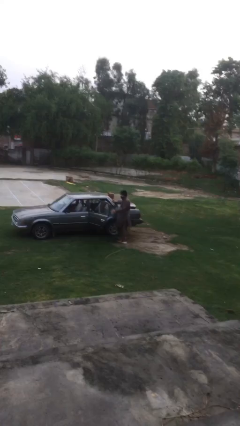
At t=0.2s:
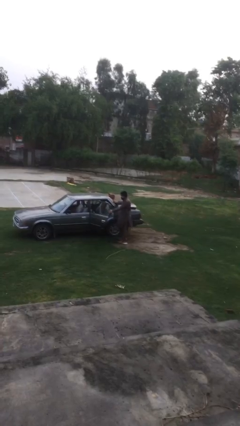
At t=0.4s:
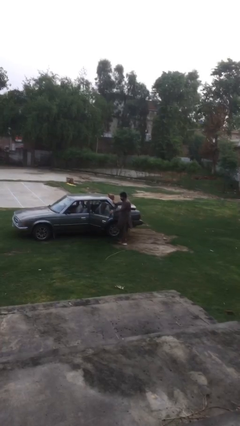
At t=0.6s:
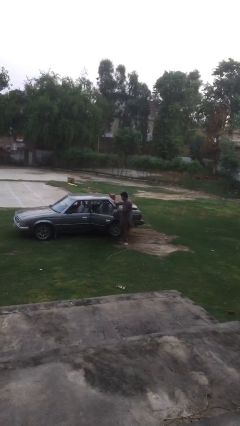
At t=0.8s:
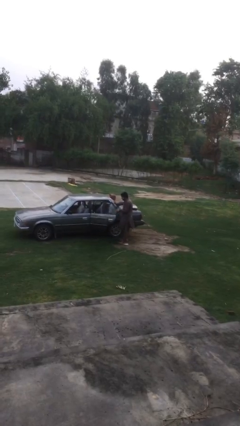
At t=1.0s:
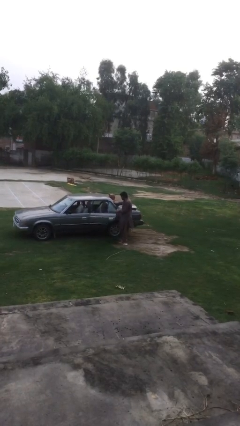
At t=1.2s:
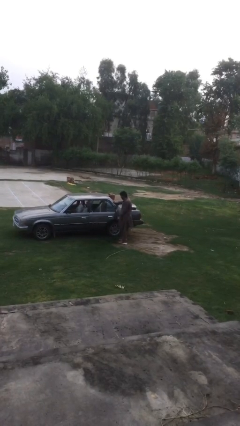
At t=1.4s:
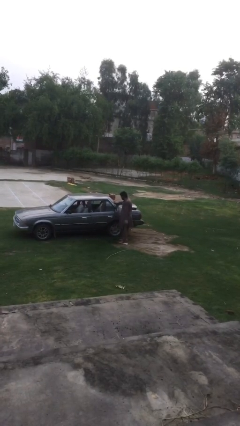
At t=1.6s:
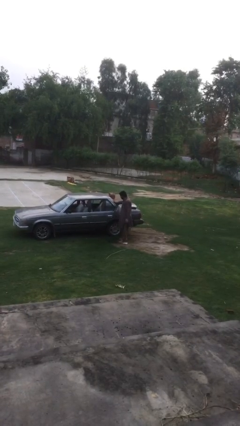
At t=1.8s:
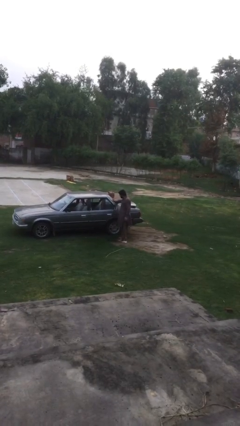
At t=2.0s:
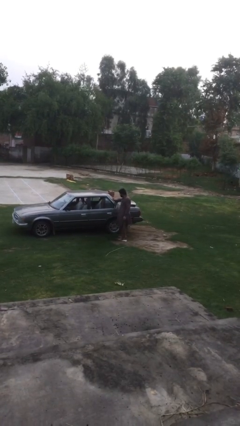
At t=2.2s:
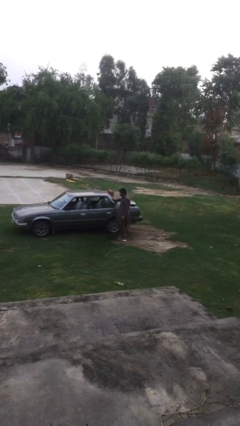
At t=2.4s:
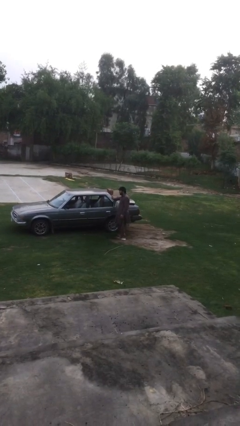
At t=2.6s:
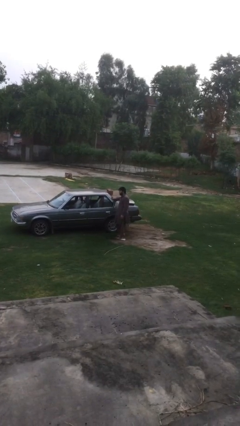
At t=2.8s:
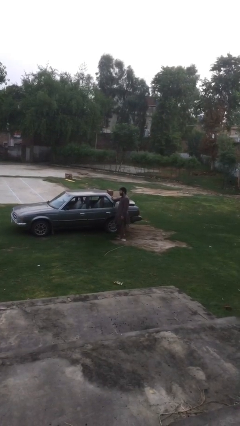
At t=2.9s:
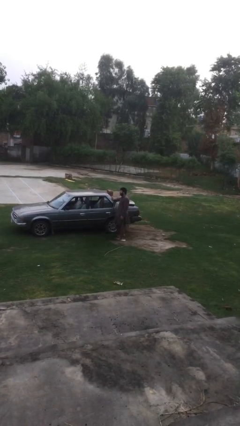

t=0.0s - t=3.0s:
person closes car door

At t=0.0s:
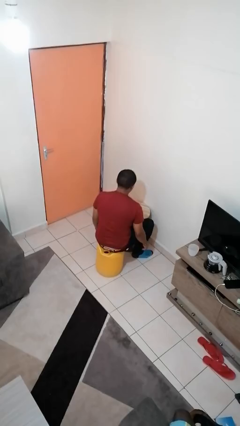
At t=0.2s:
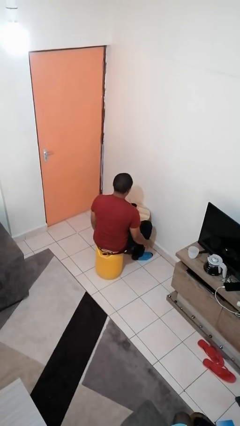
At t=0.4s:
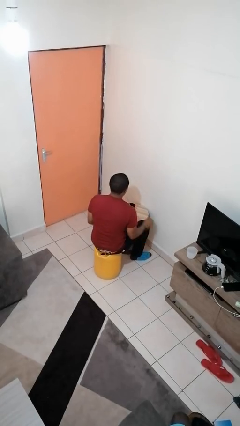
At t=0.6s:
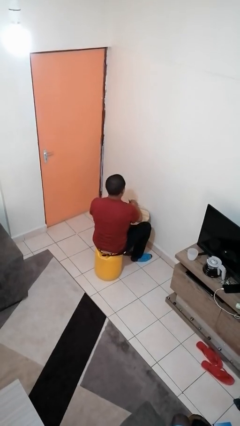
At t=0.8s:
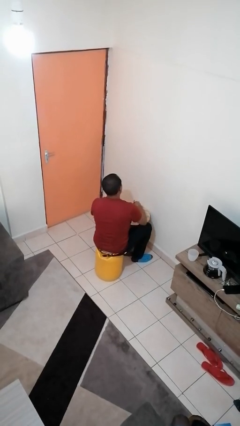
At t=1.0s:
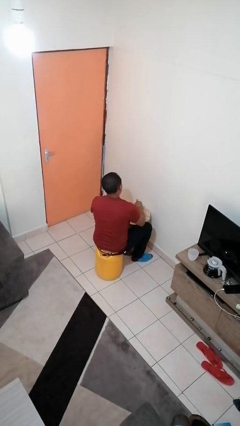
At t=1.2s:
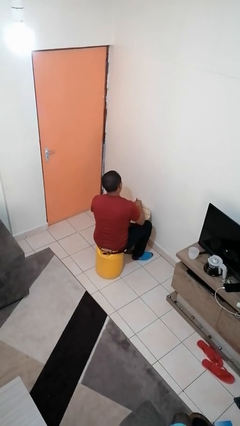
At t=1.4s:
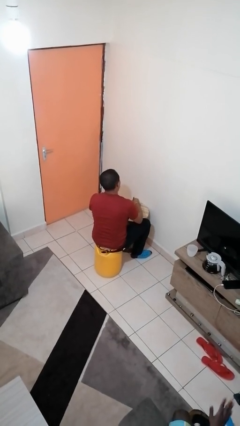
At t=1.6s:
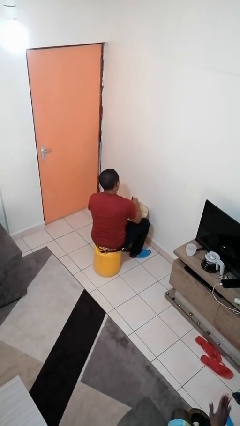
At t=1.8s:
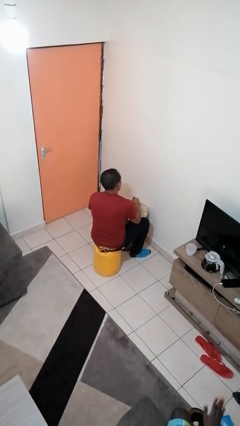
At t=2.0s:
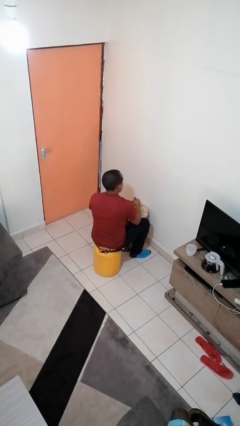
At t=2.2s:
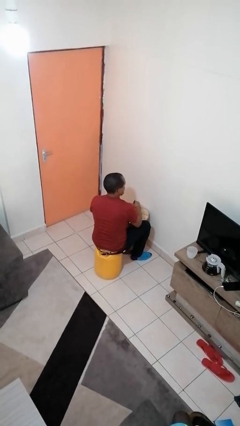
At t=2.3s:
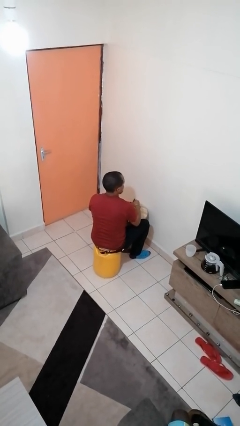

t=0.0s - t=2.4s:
person stirs mug

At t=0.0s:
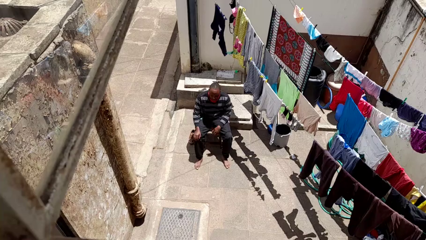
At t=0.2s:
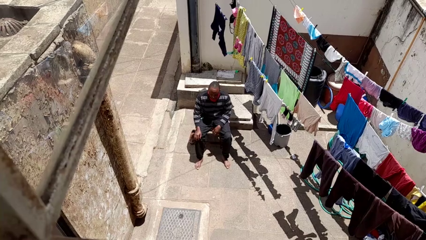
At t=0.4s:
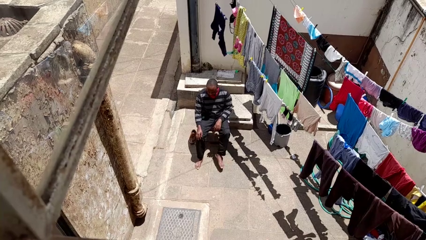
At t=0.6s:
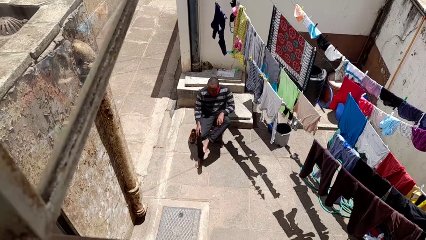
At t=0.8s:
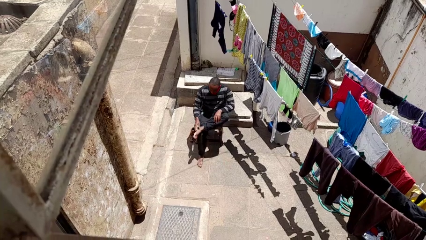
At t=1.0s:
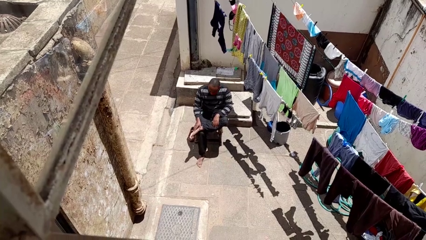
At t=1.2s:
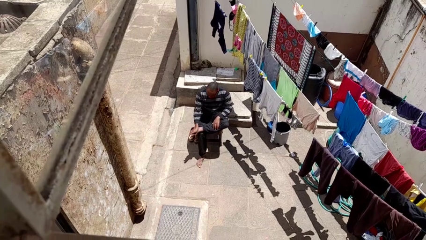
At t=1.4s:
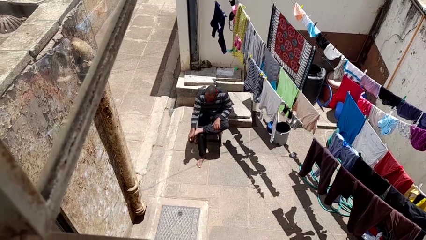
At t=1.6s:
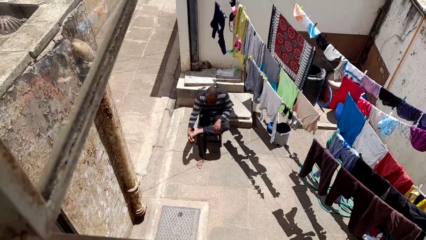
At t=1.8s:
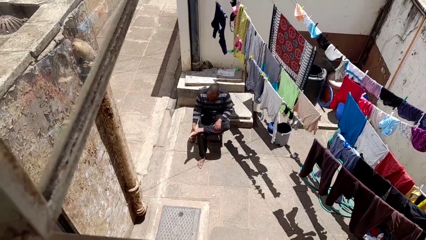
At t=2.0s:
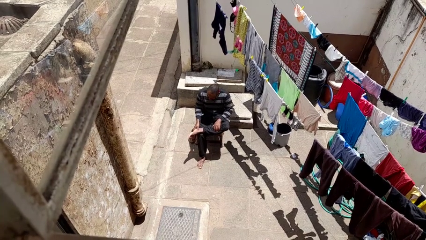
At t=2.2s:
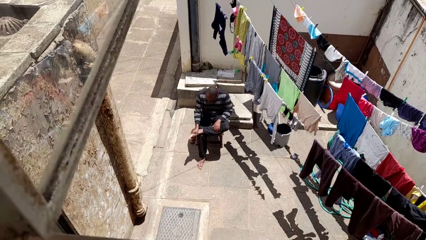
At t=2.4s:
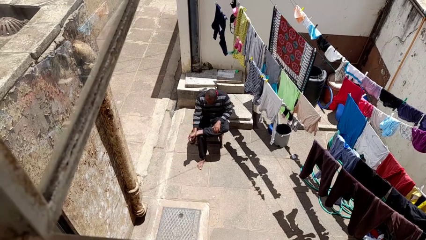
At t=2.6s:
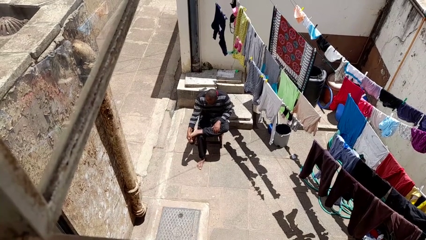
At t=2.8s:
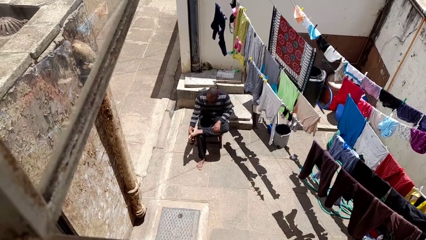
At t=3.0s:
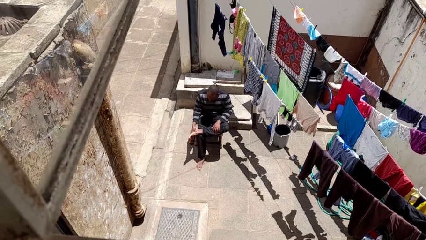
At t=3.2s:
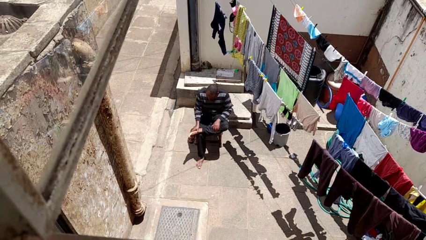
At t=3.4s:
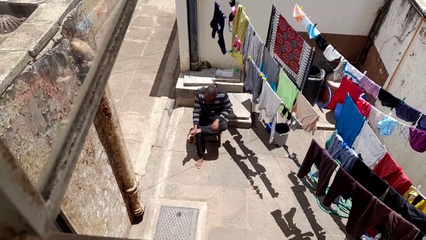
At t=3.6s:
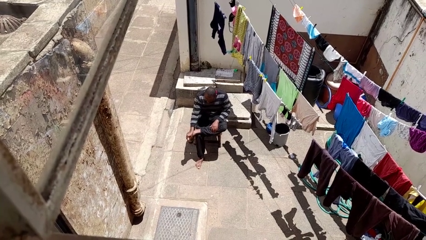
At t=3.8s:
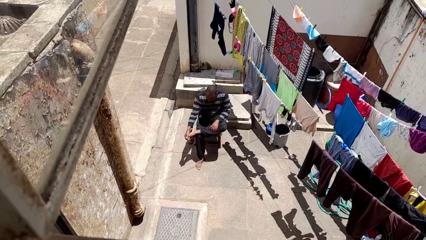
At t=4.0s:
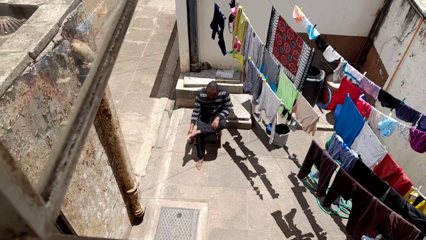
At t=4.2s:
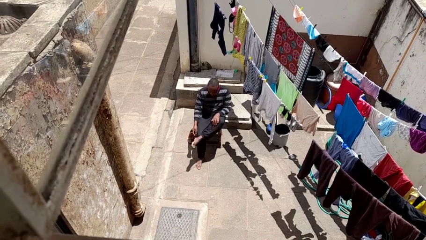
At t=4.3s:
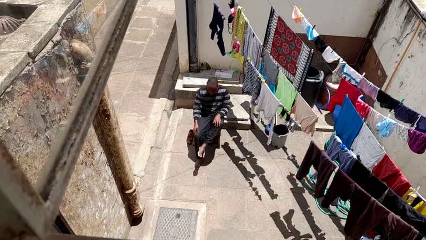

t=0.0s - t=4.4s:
person rubs foot

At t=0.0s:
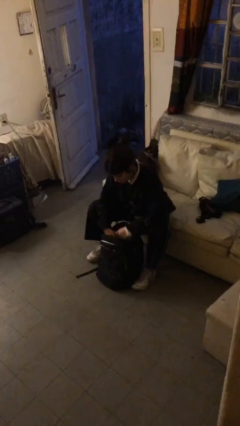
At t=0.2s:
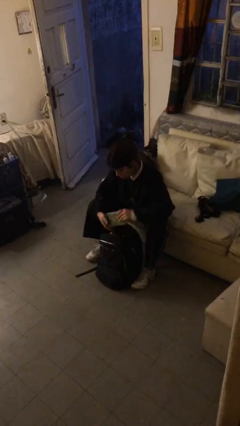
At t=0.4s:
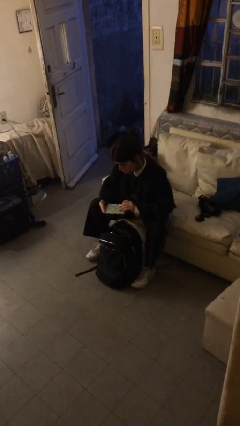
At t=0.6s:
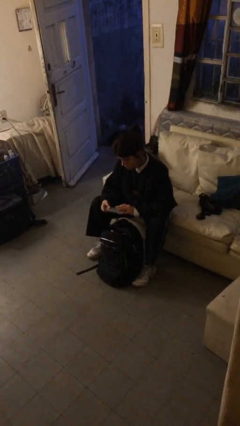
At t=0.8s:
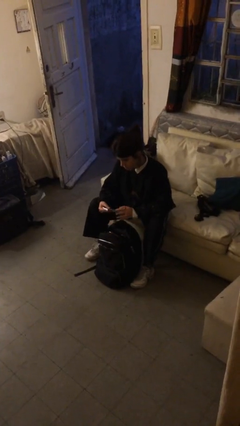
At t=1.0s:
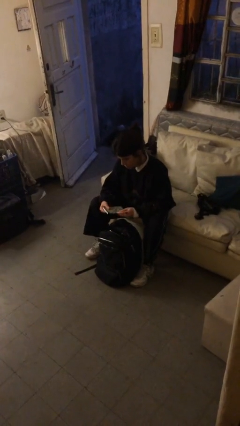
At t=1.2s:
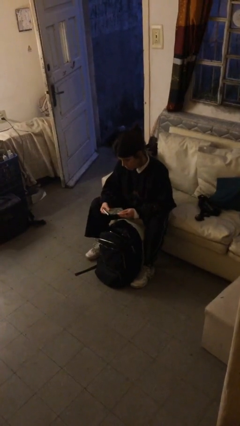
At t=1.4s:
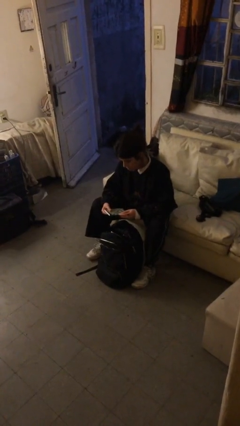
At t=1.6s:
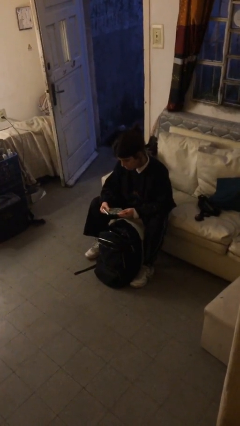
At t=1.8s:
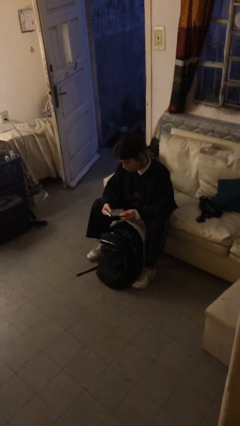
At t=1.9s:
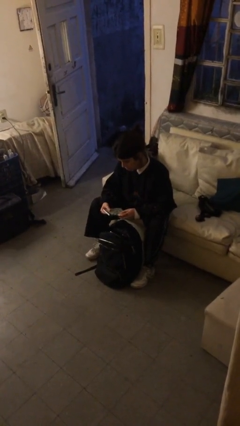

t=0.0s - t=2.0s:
person takes object from backpack

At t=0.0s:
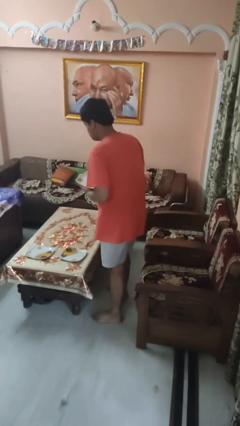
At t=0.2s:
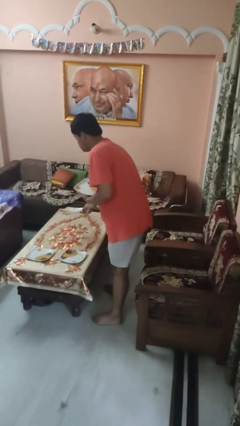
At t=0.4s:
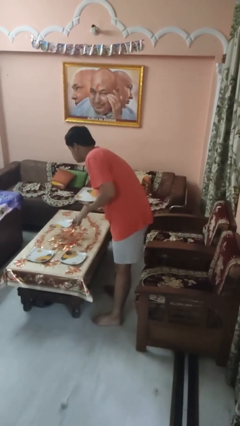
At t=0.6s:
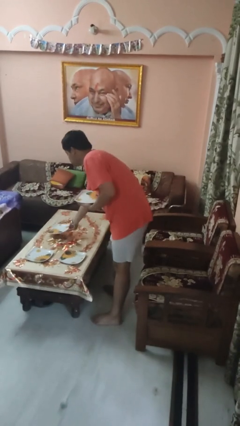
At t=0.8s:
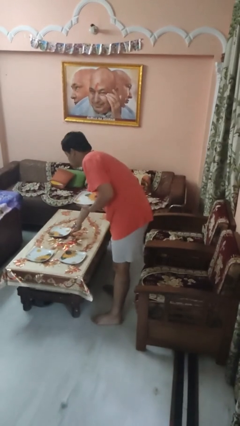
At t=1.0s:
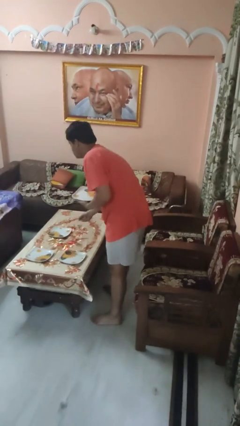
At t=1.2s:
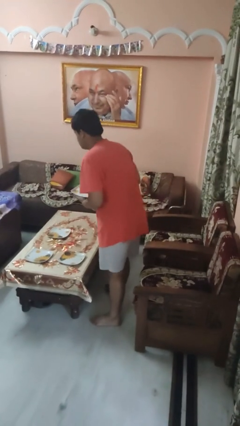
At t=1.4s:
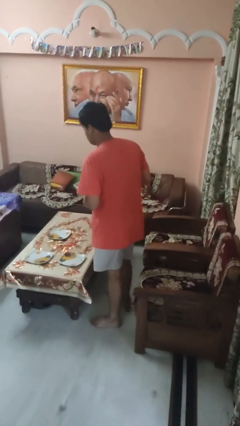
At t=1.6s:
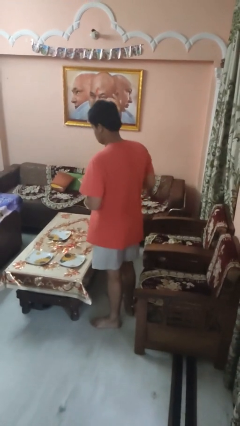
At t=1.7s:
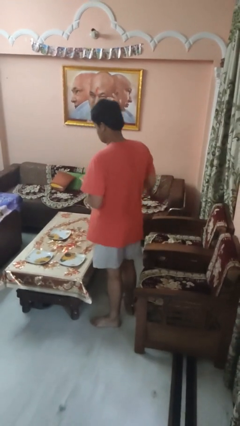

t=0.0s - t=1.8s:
person sets table

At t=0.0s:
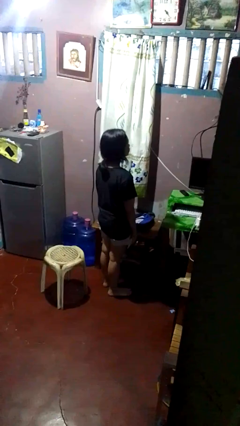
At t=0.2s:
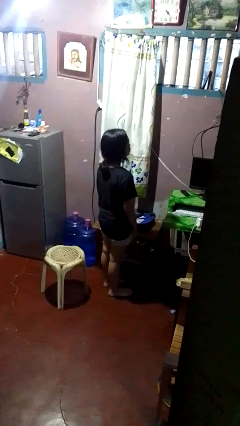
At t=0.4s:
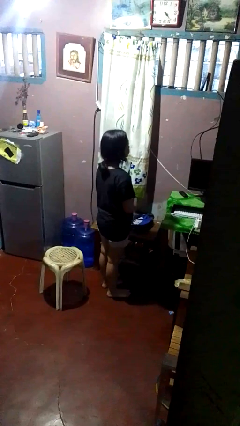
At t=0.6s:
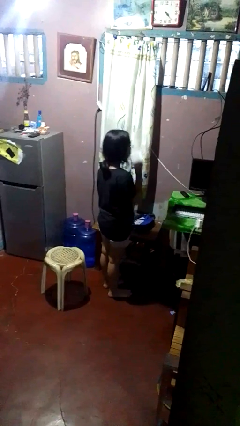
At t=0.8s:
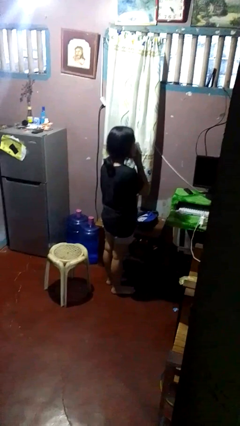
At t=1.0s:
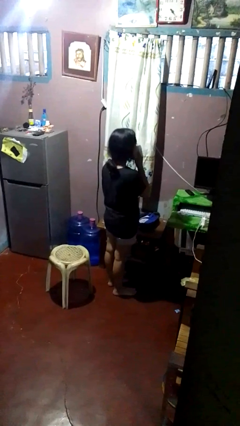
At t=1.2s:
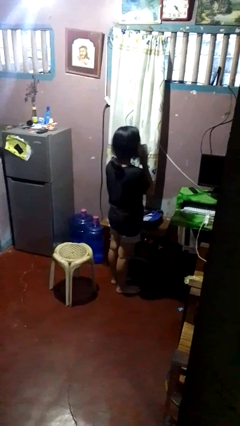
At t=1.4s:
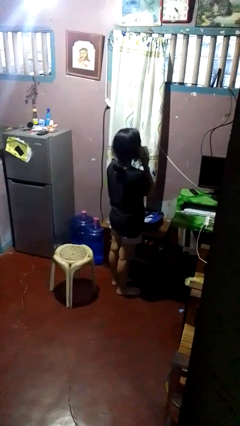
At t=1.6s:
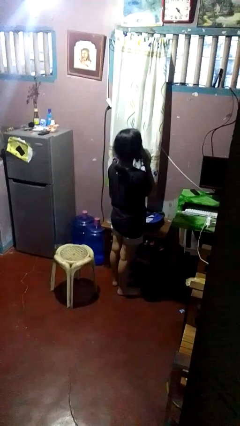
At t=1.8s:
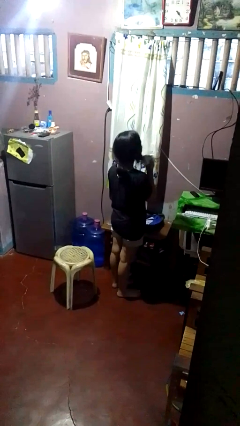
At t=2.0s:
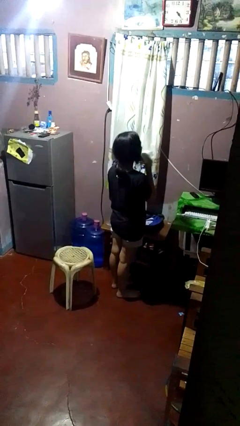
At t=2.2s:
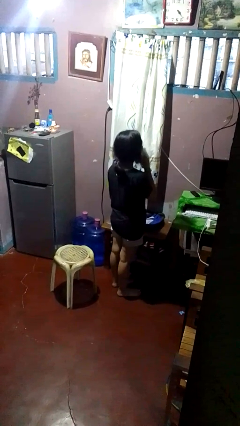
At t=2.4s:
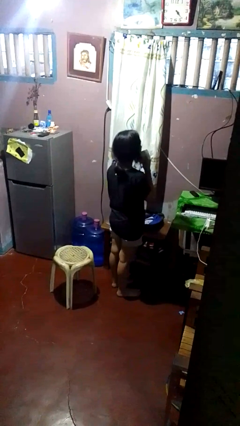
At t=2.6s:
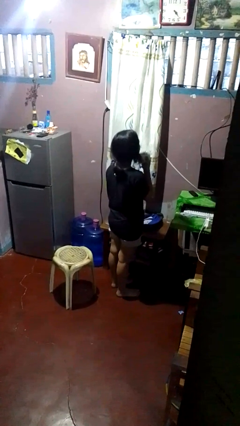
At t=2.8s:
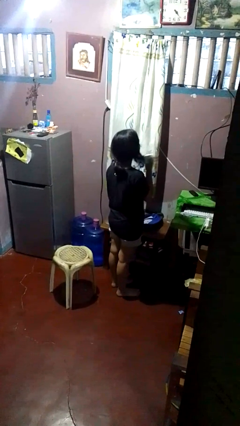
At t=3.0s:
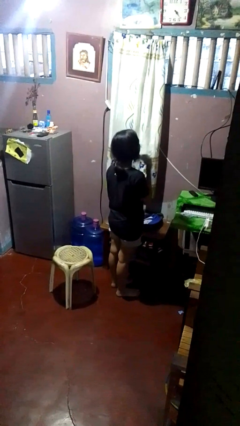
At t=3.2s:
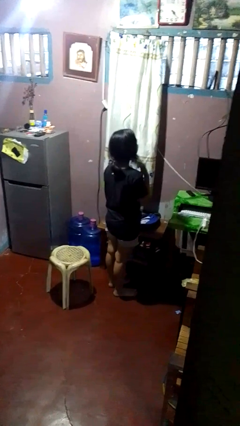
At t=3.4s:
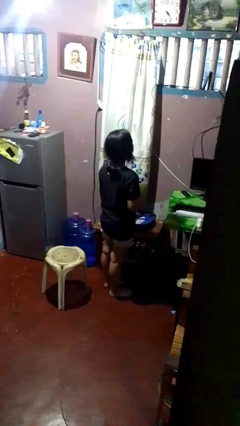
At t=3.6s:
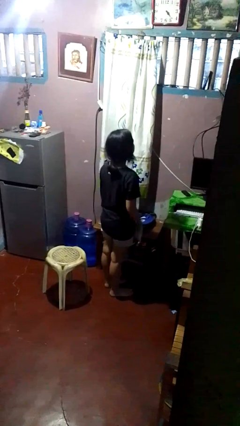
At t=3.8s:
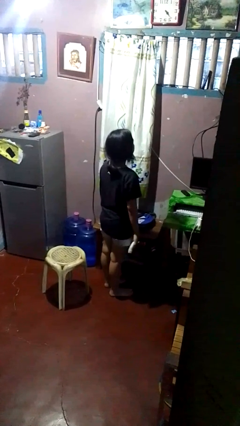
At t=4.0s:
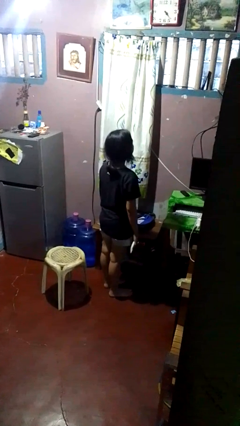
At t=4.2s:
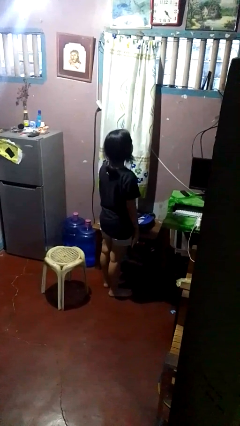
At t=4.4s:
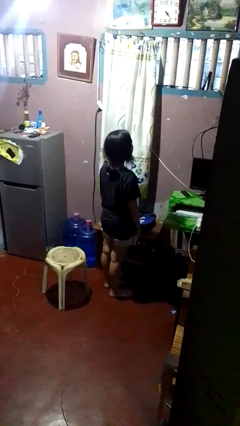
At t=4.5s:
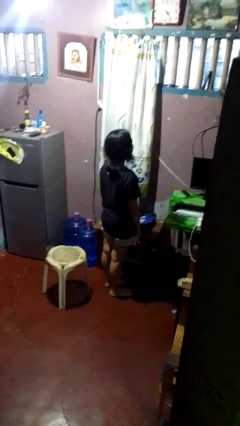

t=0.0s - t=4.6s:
person wipes mouth with napkin
